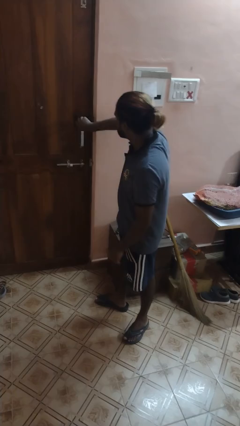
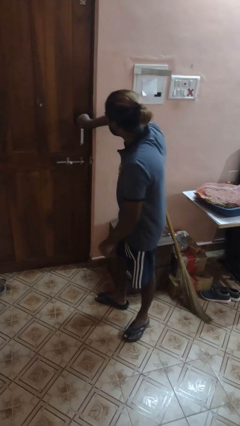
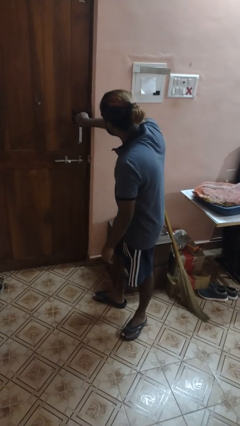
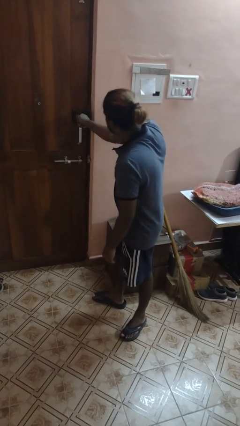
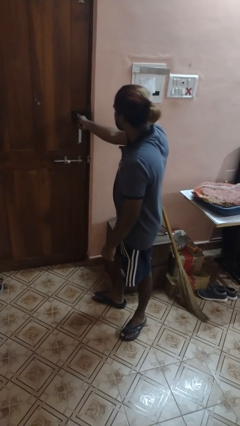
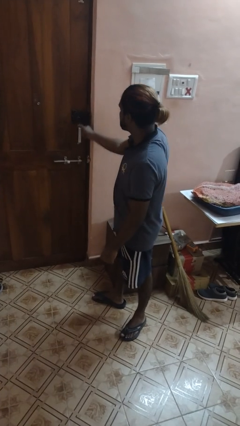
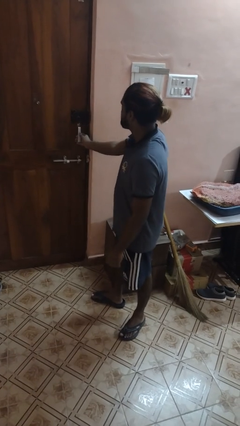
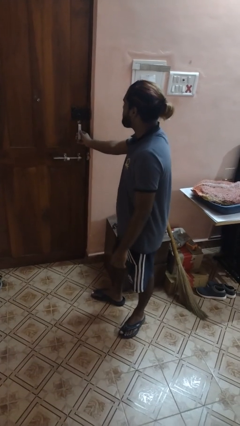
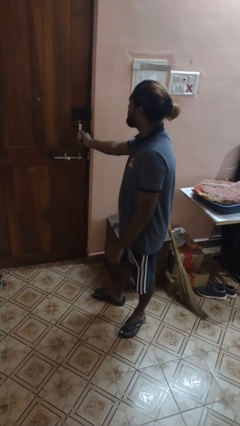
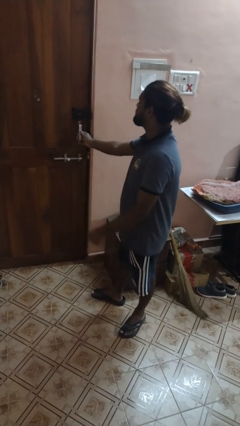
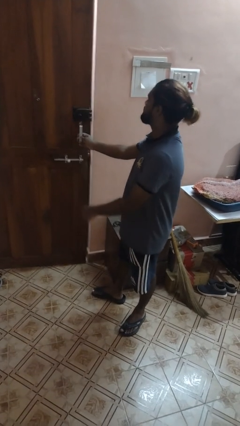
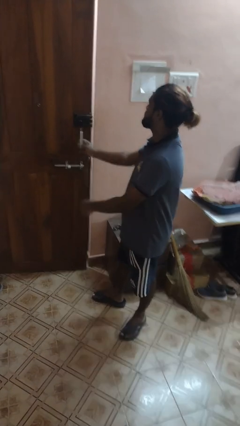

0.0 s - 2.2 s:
person unlocks door with keys

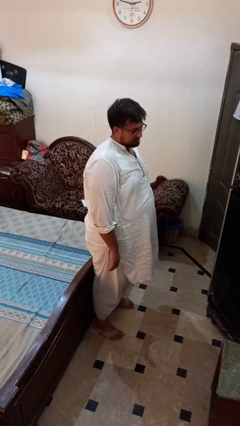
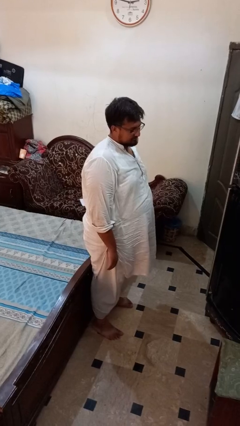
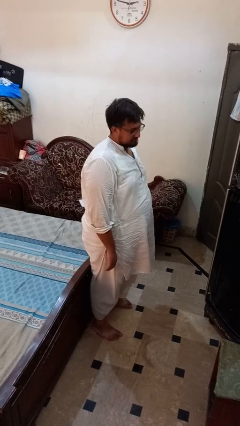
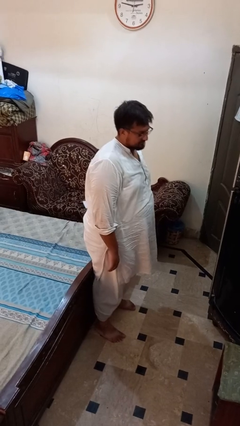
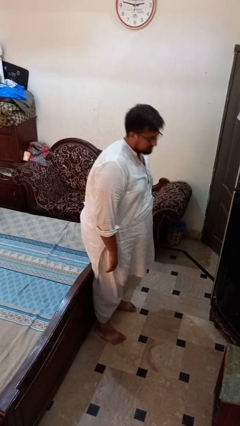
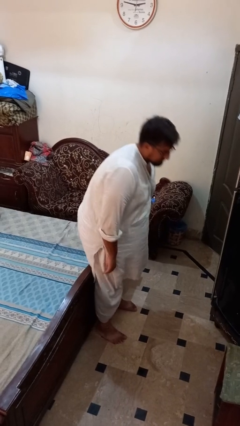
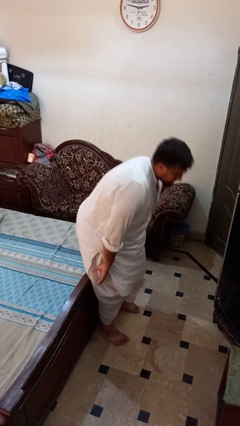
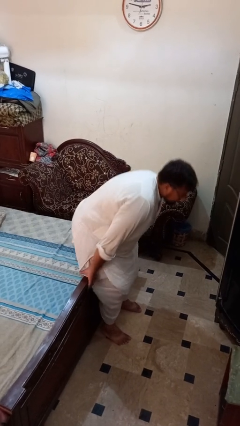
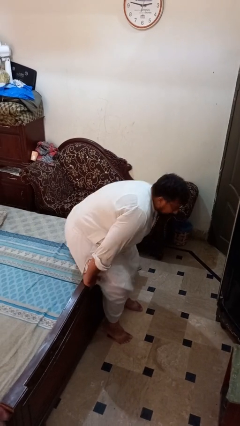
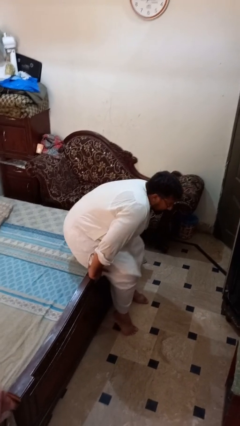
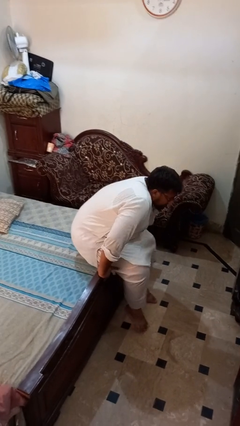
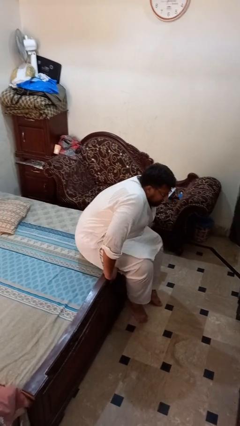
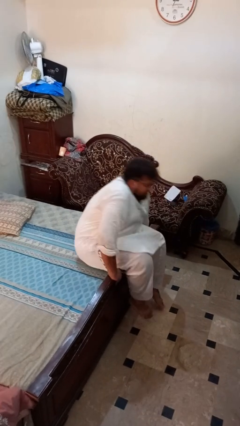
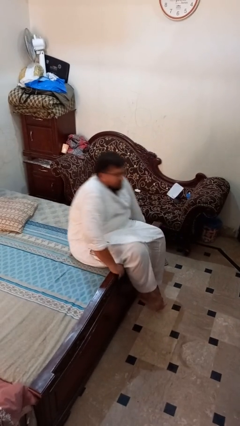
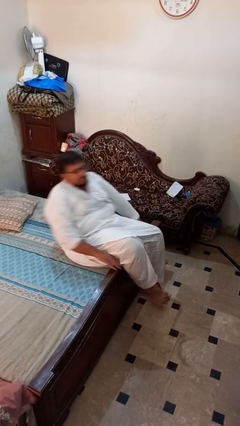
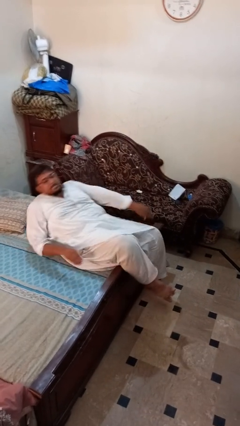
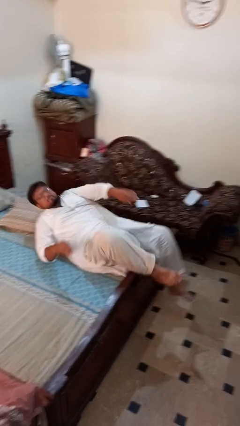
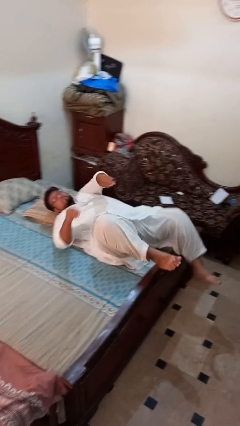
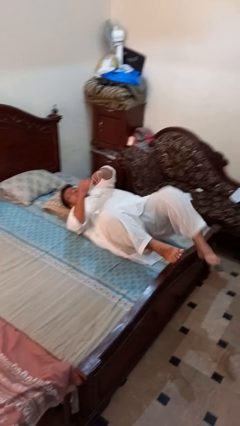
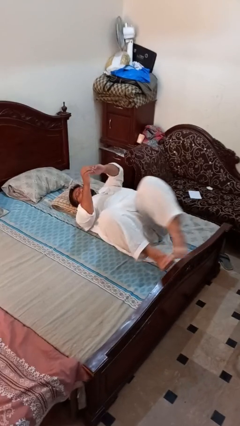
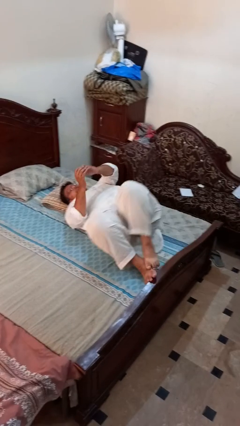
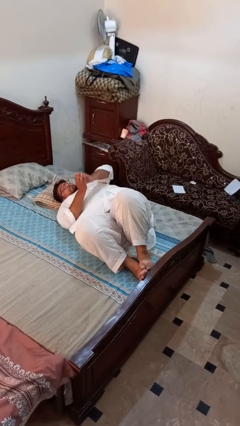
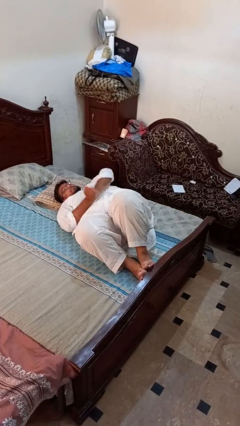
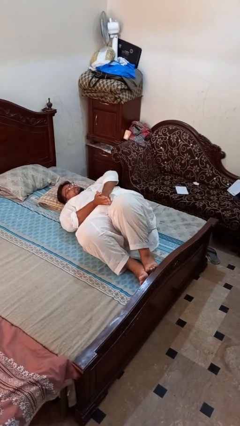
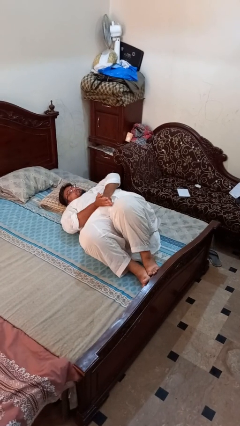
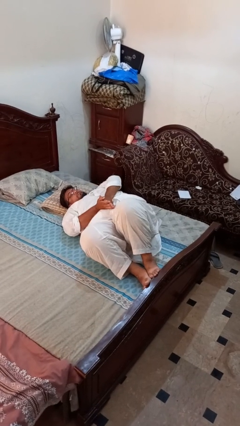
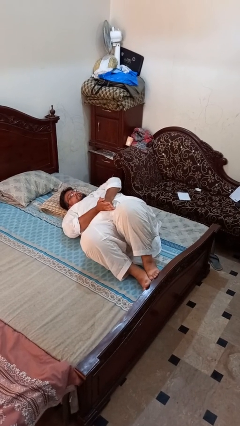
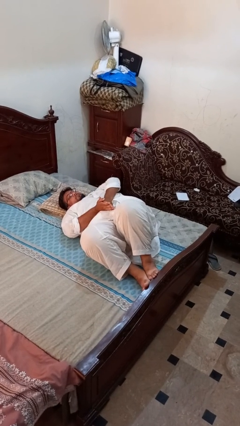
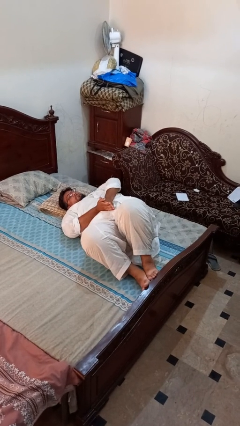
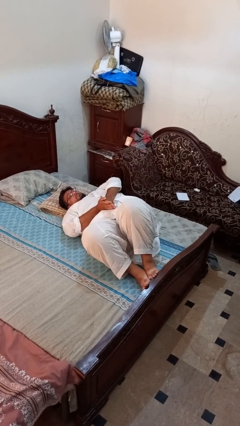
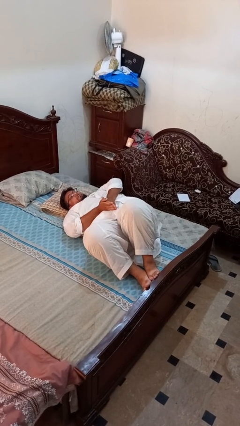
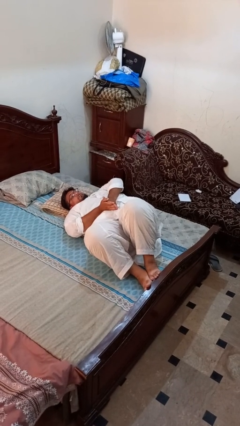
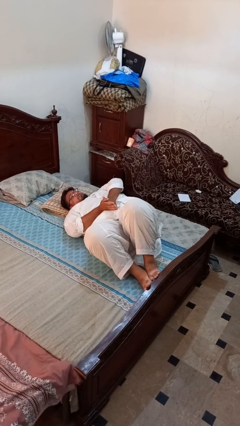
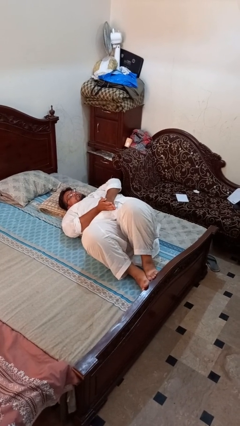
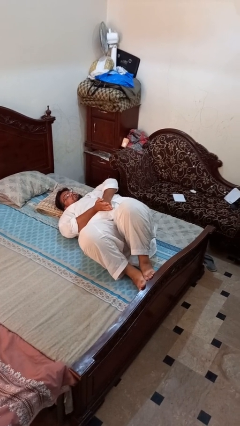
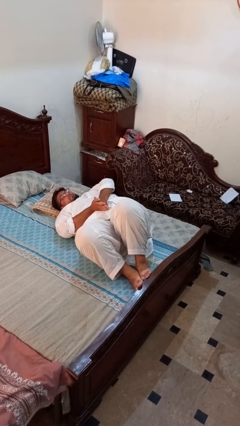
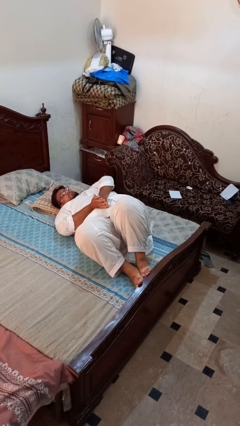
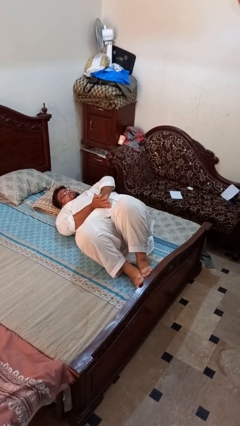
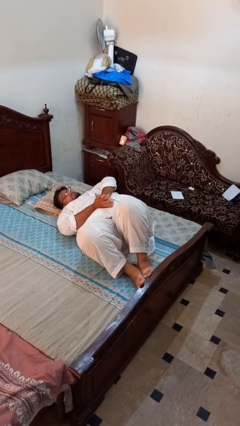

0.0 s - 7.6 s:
person lies down on bed

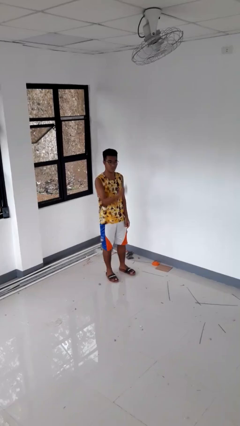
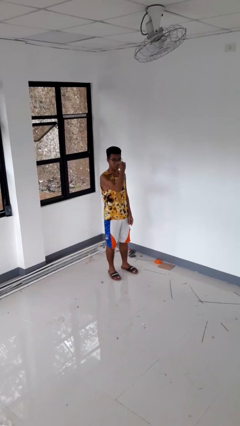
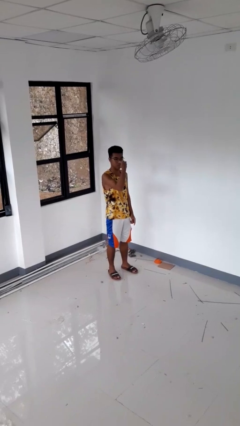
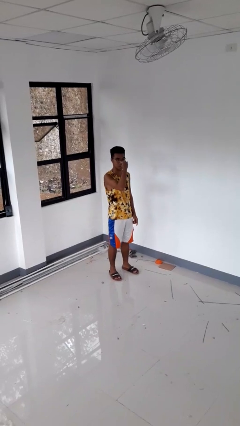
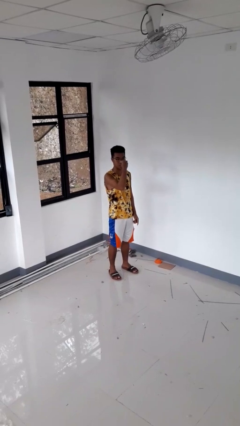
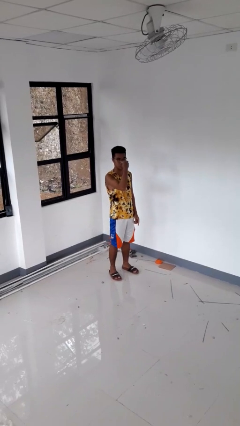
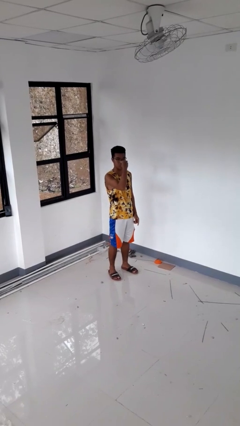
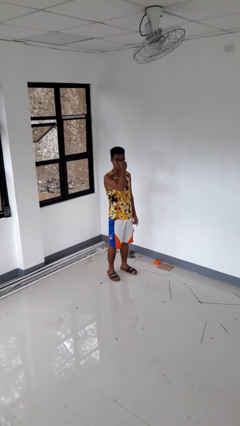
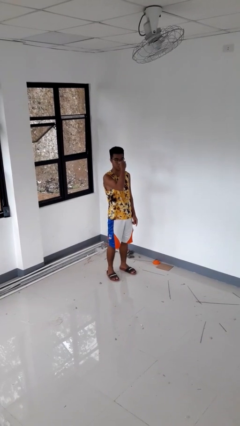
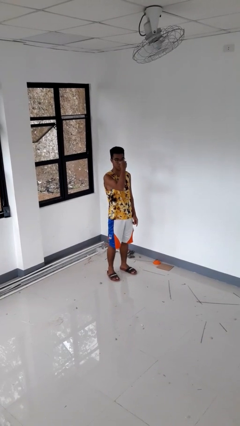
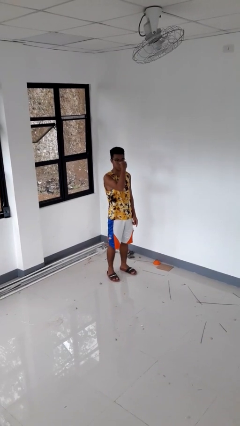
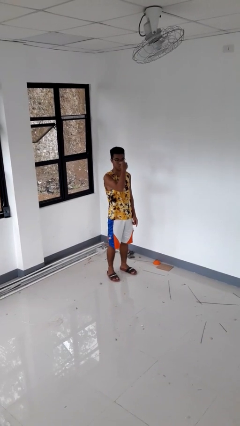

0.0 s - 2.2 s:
person gestures watch closely

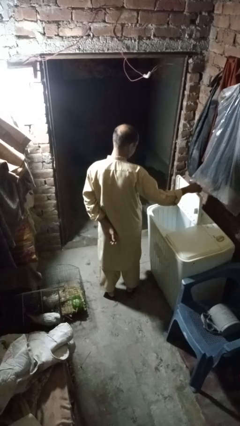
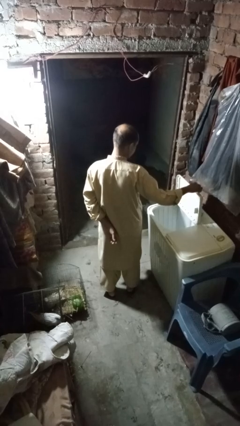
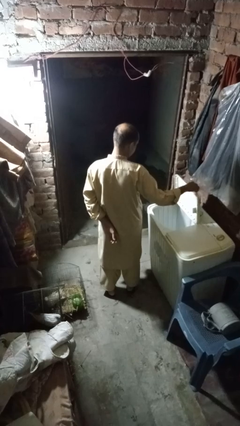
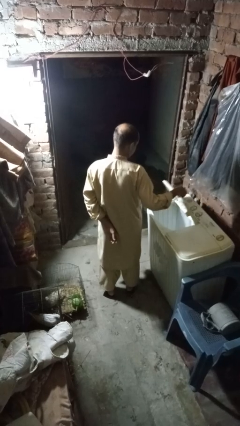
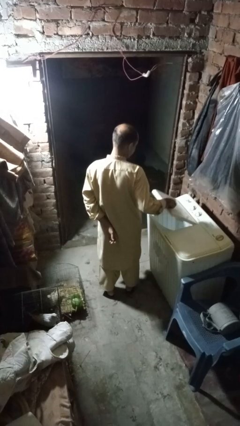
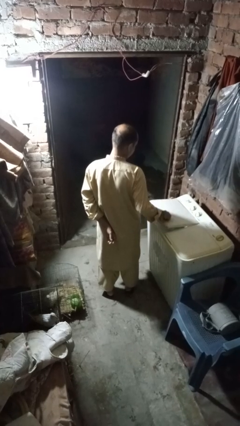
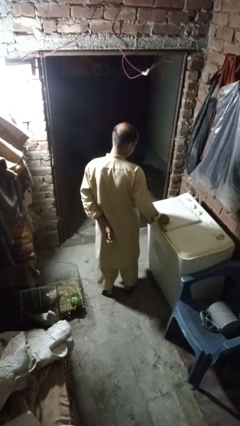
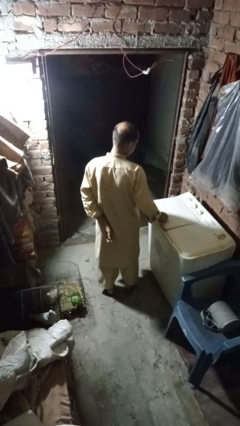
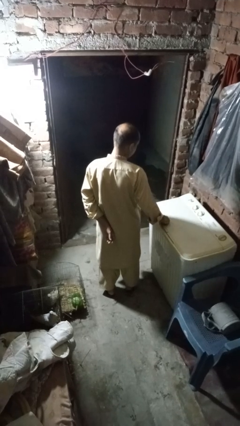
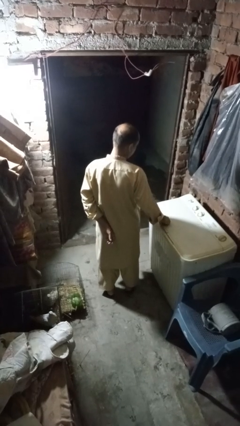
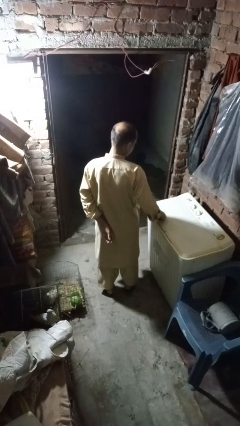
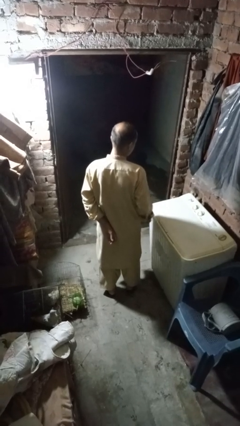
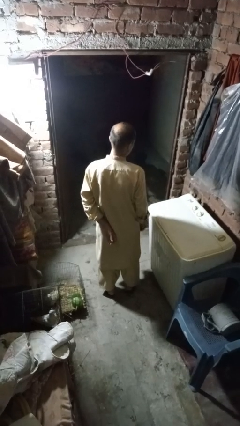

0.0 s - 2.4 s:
person closes clothes washer

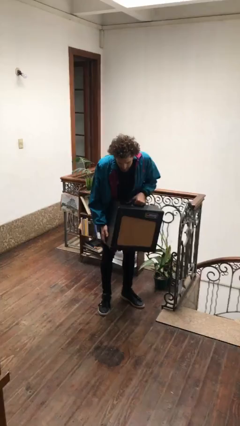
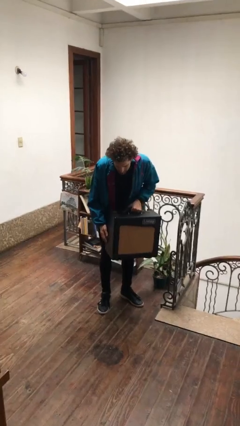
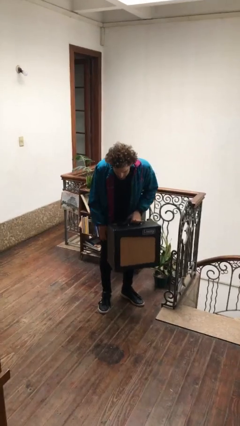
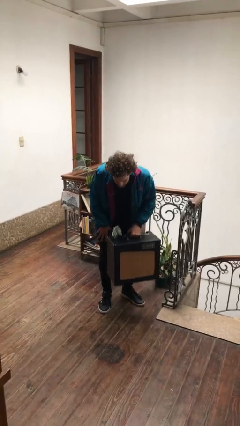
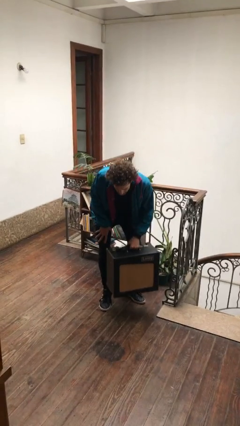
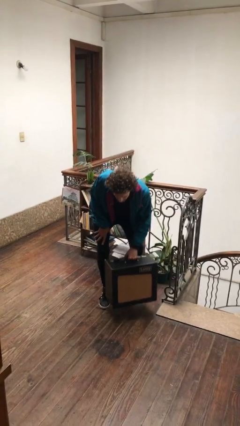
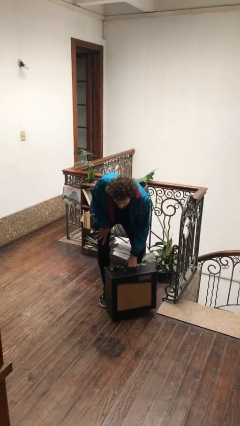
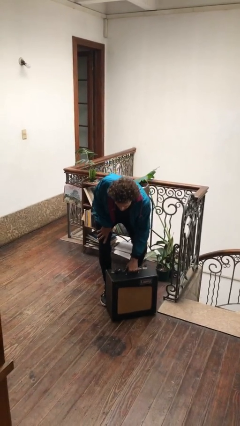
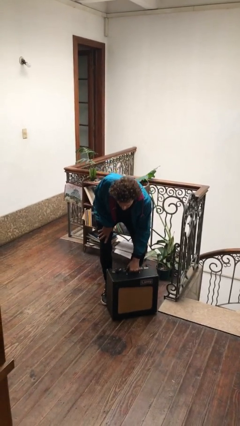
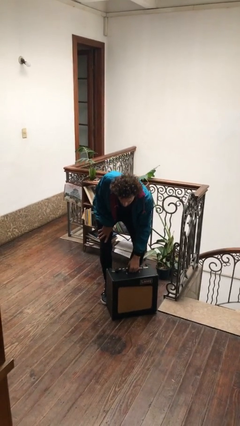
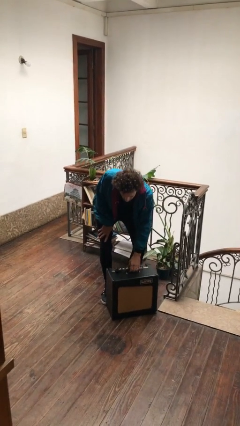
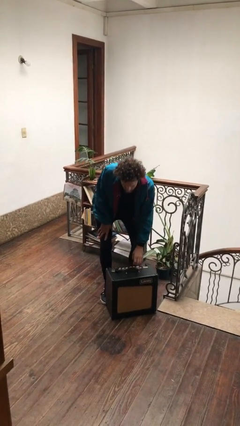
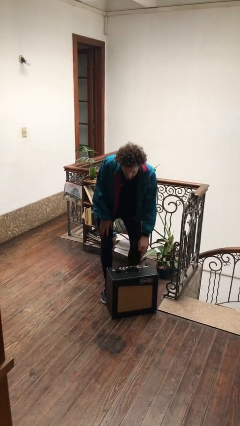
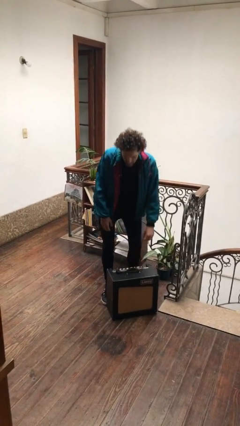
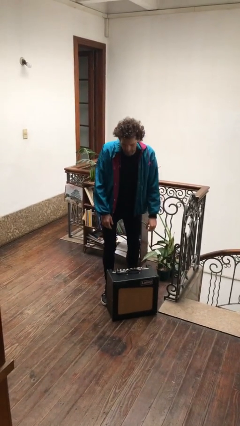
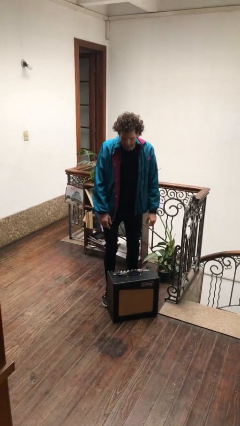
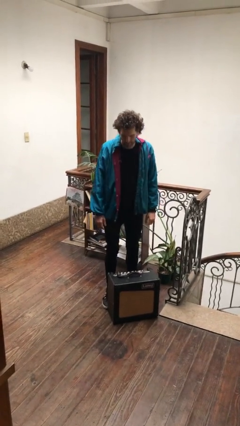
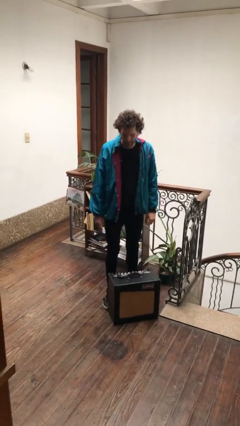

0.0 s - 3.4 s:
person puts down object on floor
